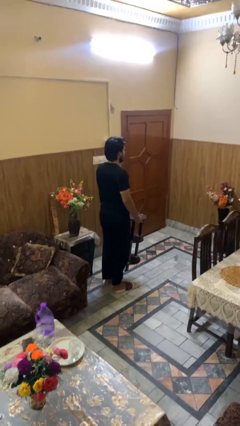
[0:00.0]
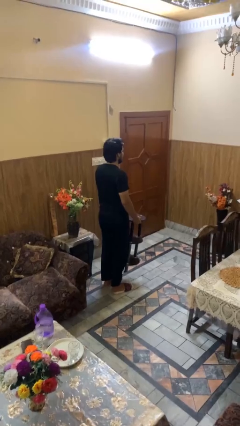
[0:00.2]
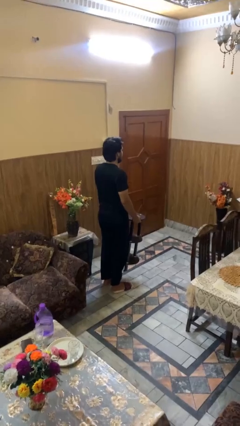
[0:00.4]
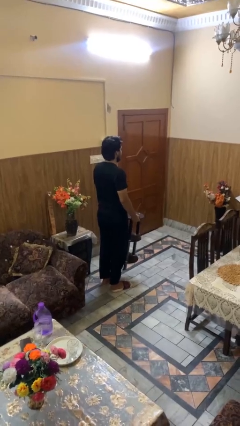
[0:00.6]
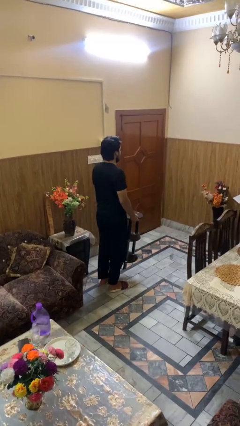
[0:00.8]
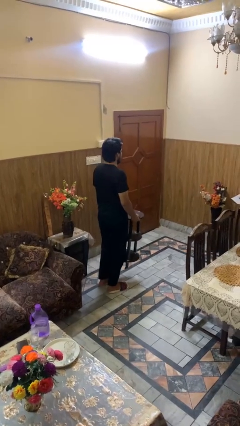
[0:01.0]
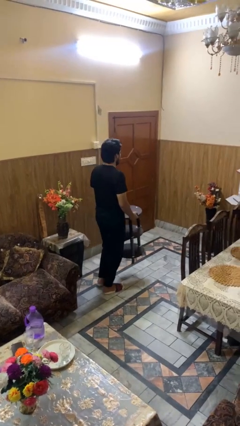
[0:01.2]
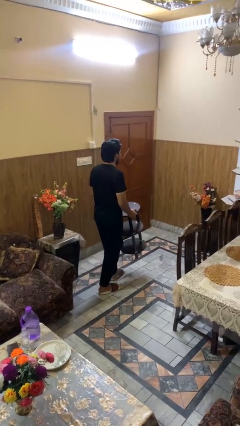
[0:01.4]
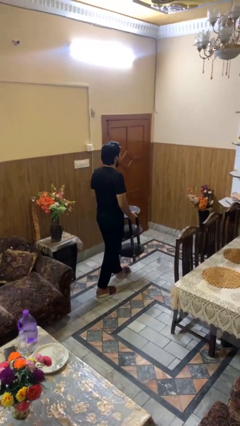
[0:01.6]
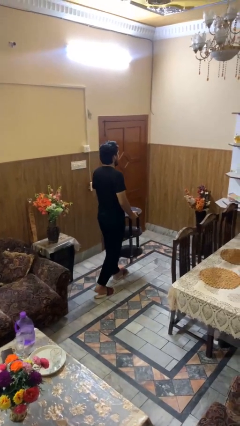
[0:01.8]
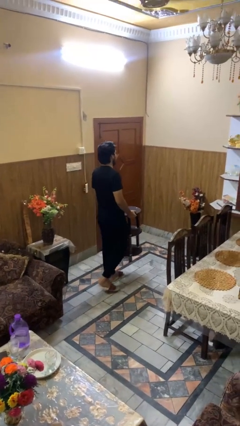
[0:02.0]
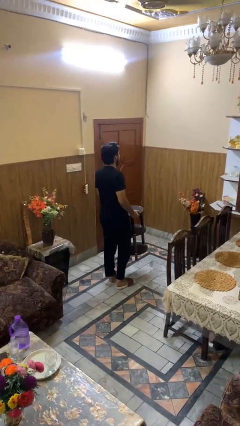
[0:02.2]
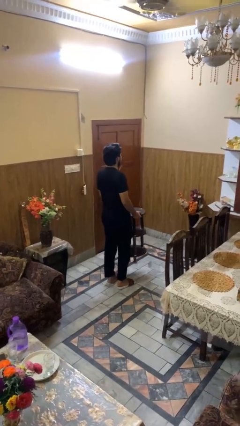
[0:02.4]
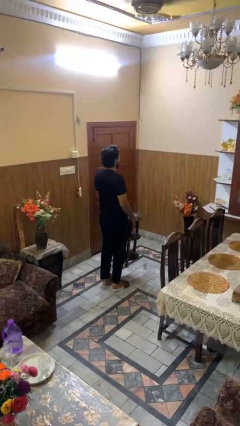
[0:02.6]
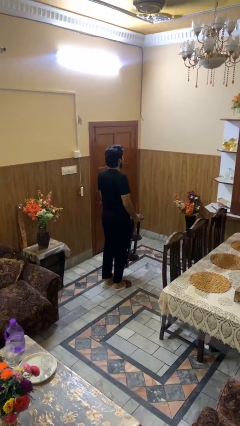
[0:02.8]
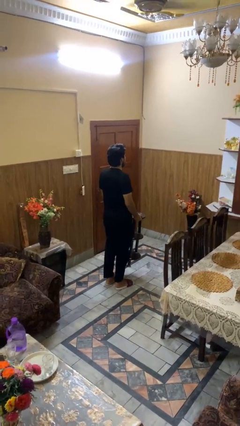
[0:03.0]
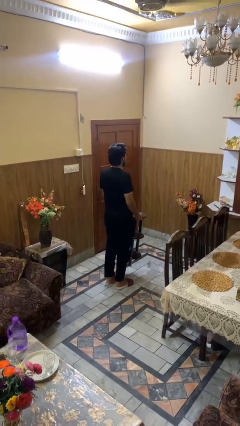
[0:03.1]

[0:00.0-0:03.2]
person carries furniture

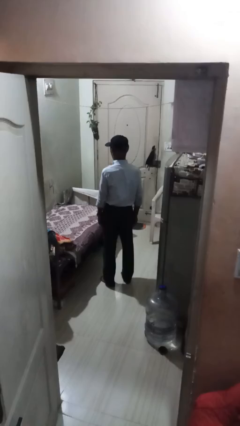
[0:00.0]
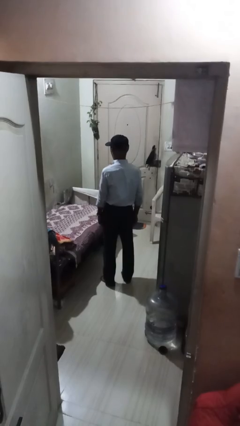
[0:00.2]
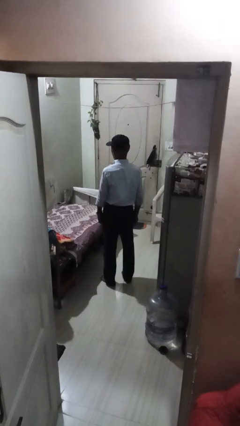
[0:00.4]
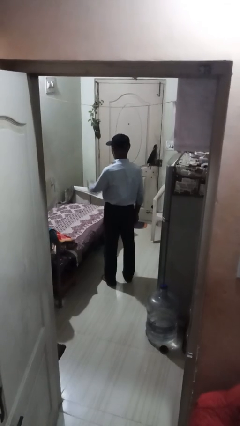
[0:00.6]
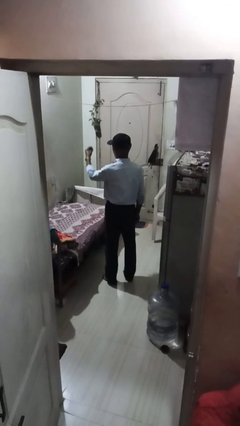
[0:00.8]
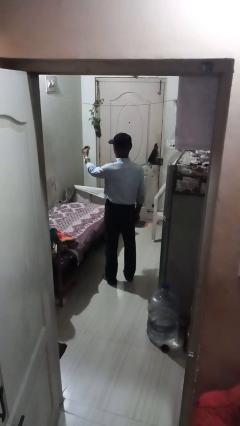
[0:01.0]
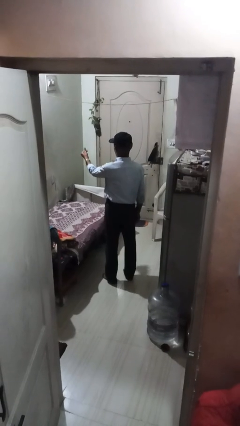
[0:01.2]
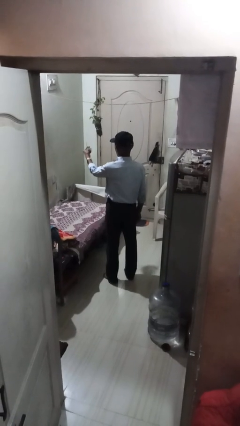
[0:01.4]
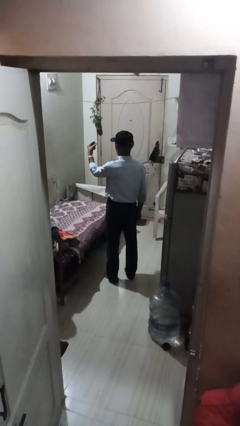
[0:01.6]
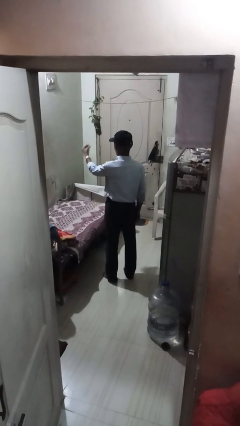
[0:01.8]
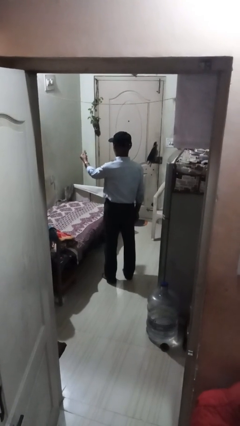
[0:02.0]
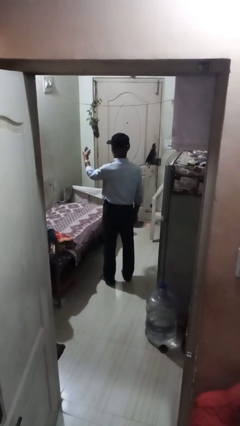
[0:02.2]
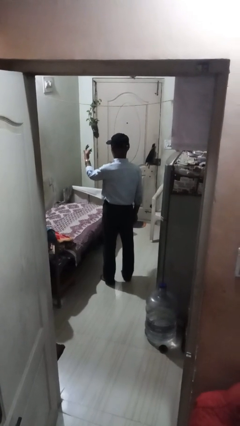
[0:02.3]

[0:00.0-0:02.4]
person snaps fingers

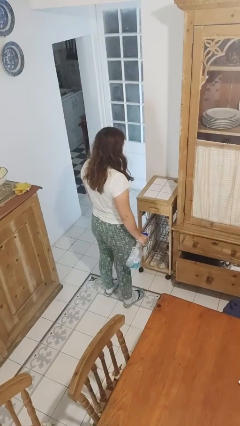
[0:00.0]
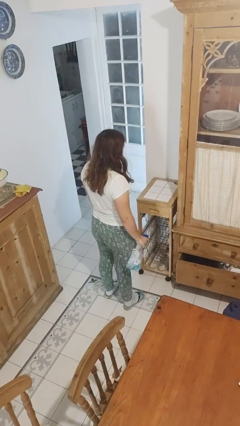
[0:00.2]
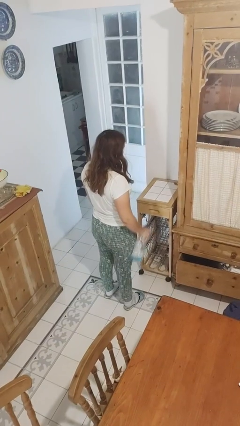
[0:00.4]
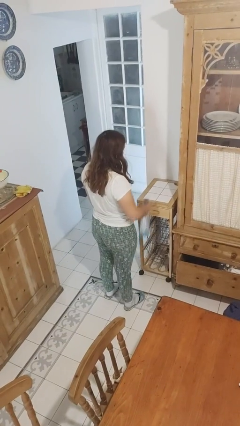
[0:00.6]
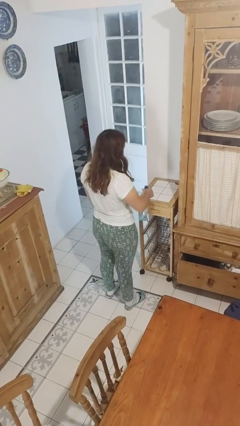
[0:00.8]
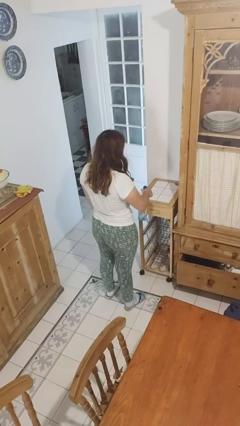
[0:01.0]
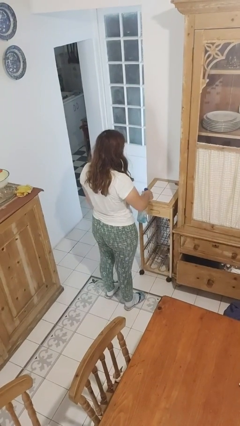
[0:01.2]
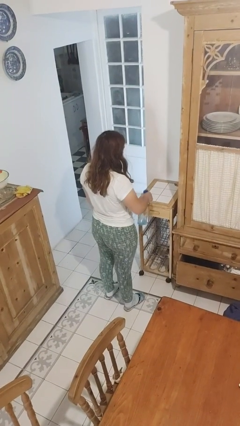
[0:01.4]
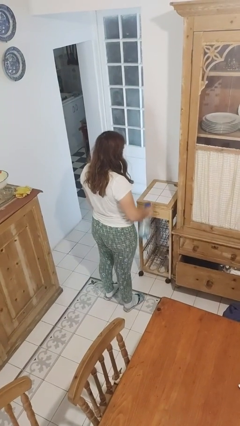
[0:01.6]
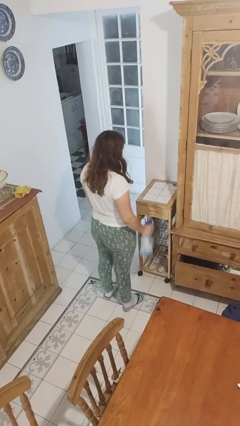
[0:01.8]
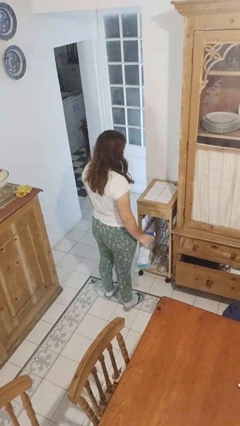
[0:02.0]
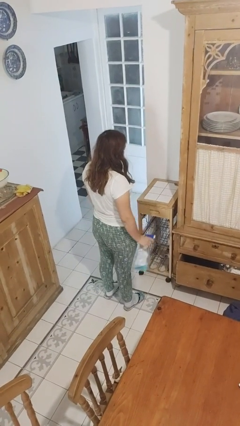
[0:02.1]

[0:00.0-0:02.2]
person sprays from bottle

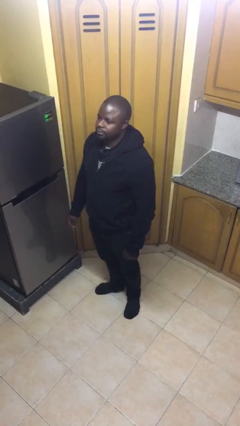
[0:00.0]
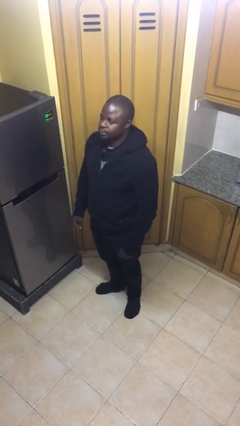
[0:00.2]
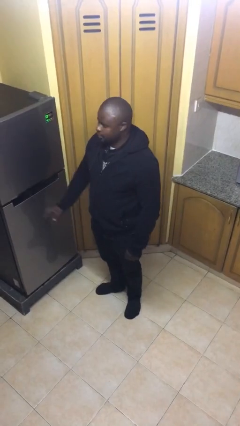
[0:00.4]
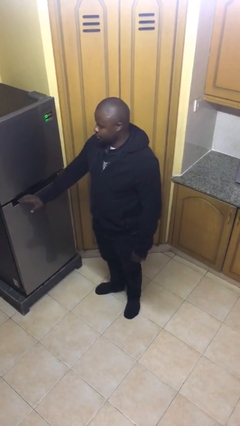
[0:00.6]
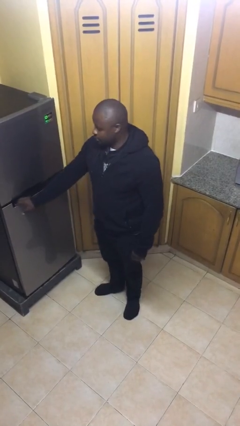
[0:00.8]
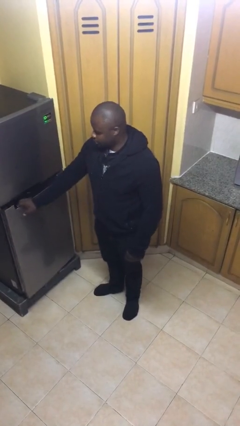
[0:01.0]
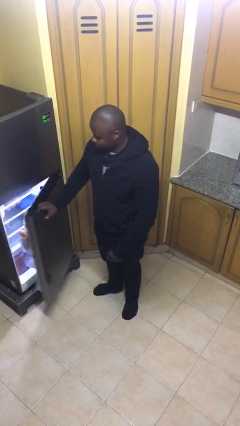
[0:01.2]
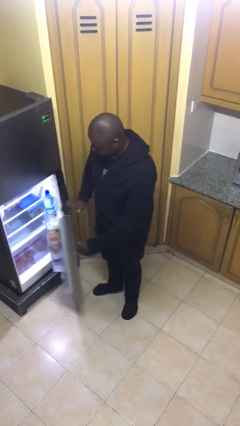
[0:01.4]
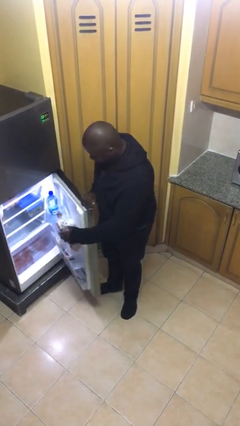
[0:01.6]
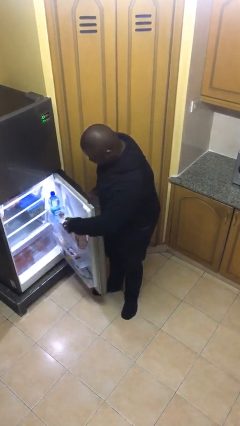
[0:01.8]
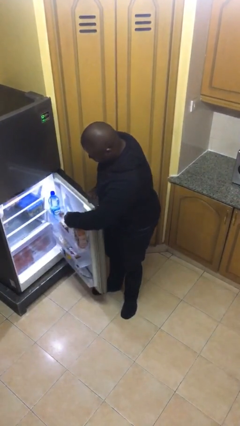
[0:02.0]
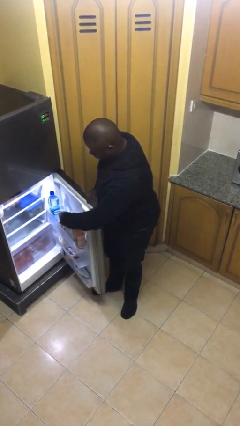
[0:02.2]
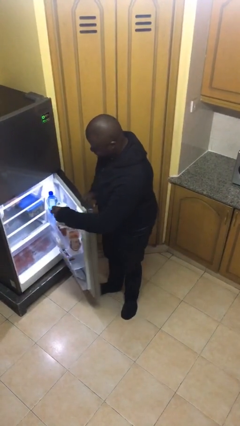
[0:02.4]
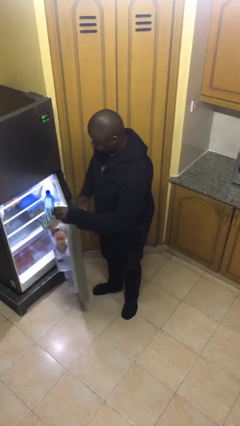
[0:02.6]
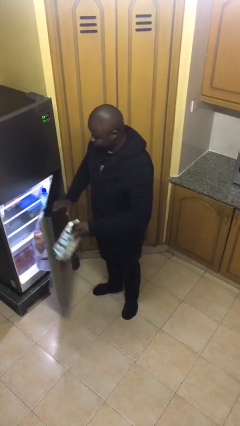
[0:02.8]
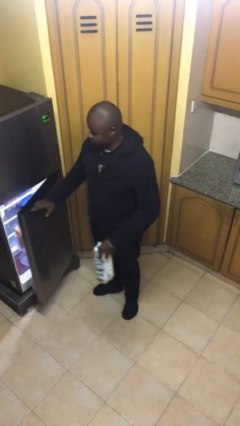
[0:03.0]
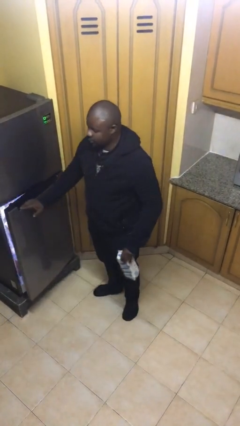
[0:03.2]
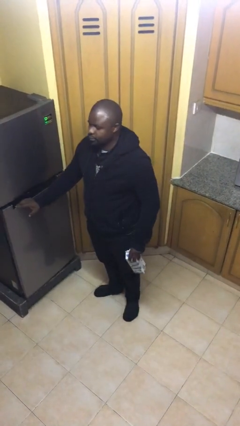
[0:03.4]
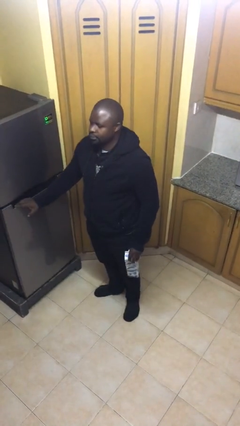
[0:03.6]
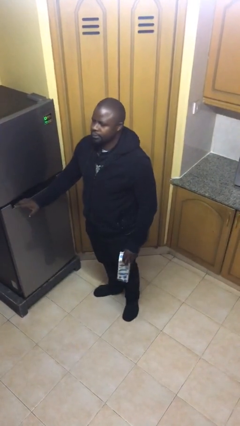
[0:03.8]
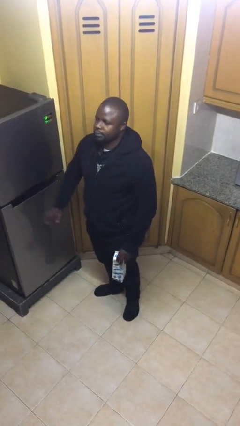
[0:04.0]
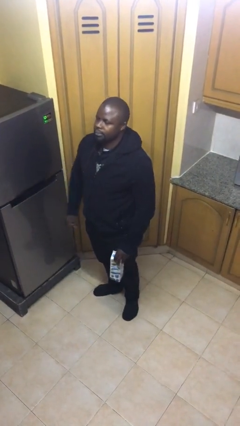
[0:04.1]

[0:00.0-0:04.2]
person takes object from refrigerator

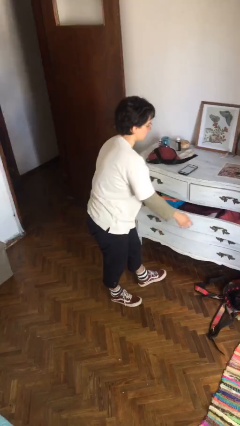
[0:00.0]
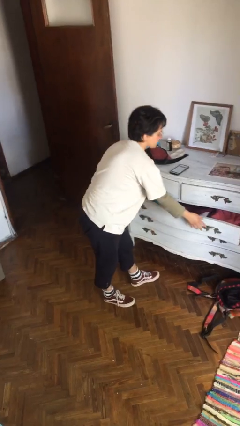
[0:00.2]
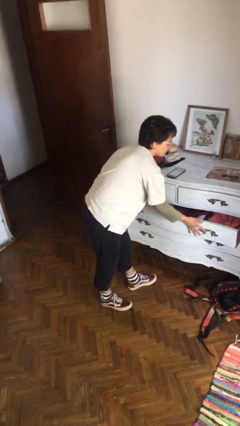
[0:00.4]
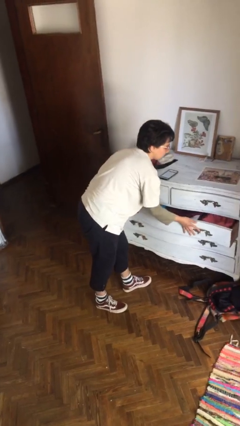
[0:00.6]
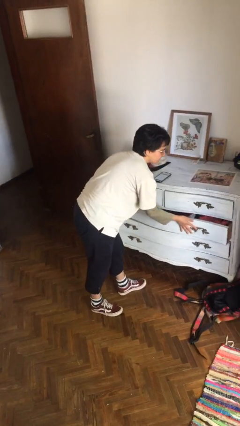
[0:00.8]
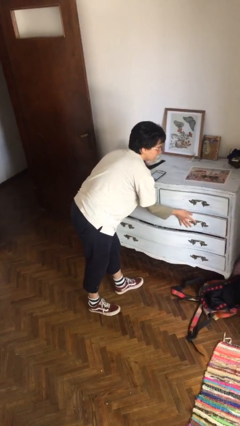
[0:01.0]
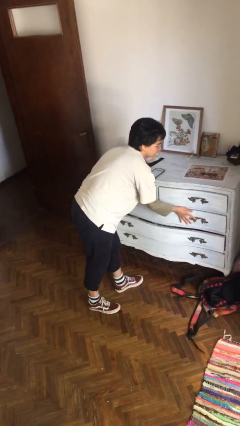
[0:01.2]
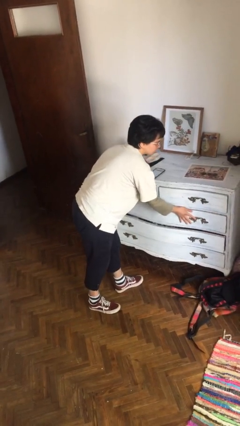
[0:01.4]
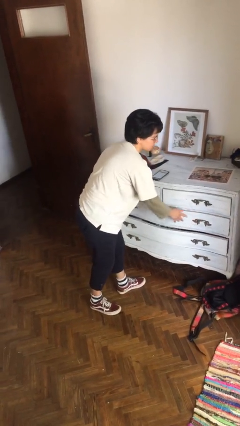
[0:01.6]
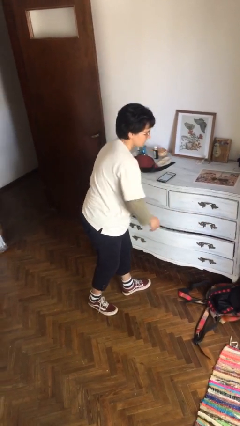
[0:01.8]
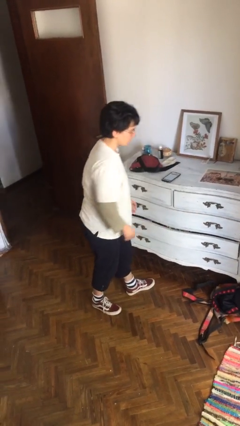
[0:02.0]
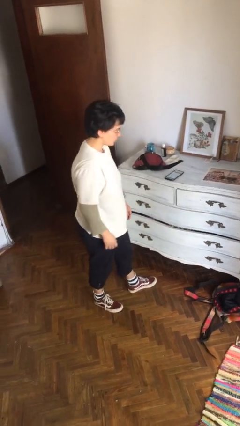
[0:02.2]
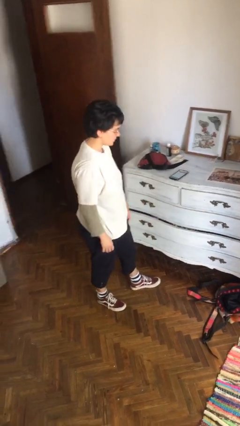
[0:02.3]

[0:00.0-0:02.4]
person closes dresser drawer

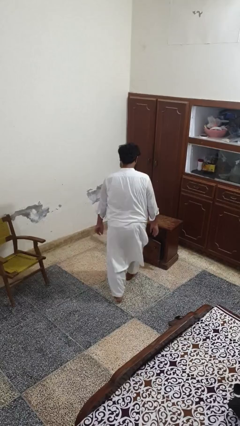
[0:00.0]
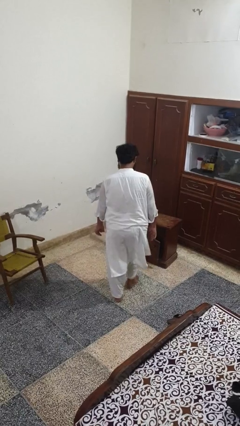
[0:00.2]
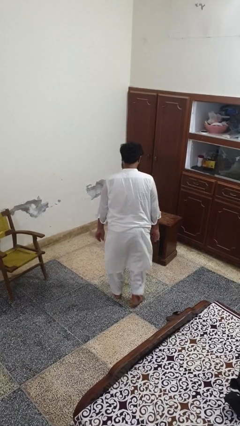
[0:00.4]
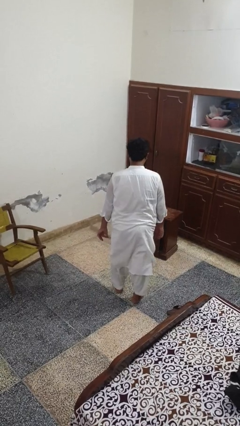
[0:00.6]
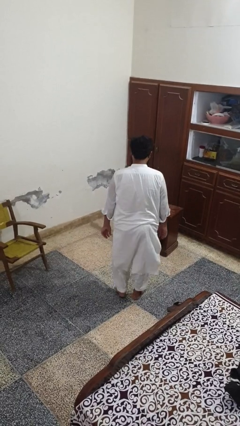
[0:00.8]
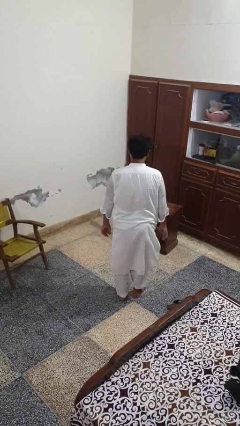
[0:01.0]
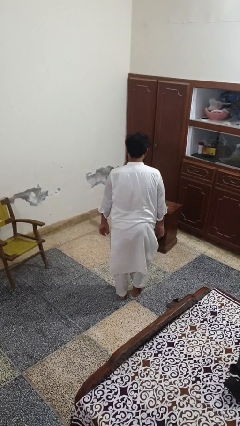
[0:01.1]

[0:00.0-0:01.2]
person stubs toe

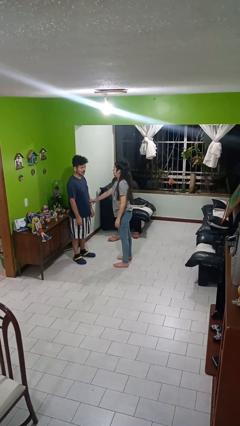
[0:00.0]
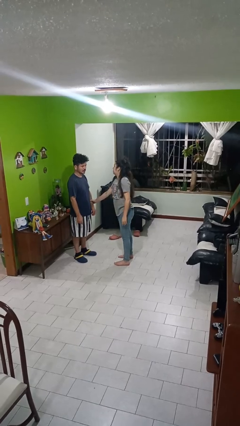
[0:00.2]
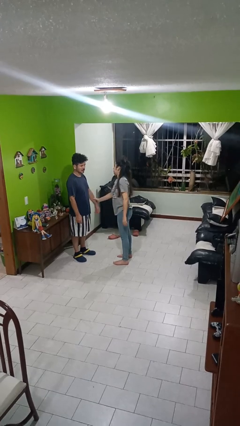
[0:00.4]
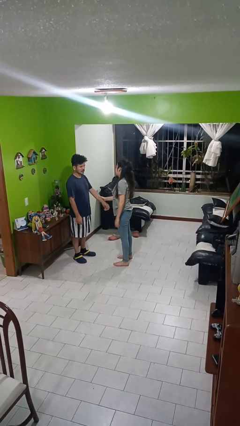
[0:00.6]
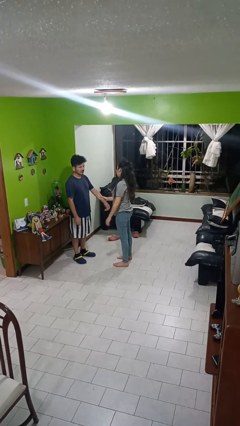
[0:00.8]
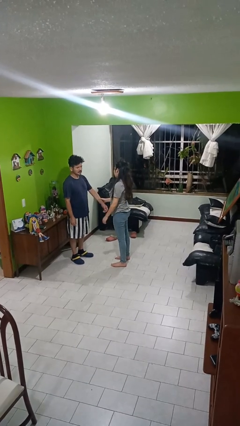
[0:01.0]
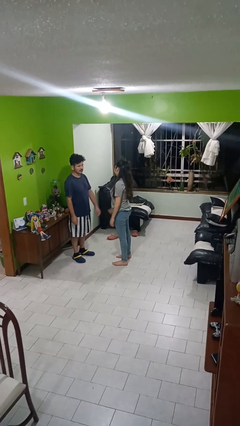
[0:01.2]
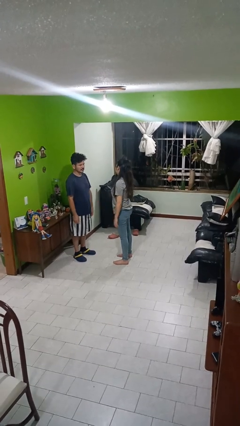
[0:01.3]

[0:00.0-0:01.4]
person grabs person by forearm

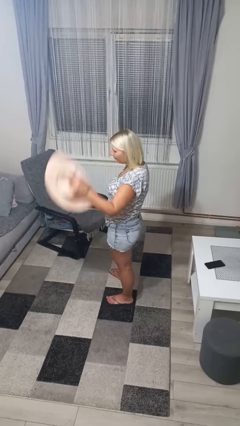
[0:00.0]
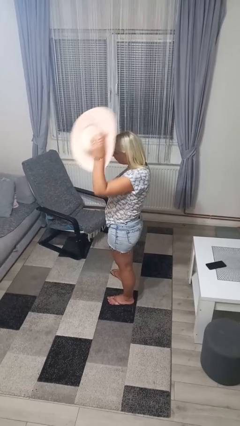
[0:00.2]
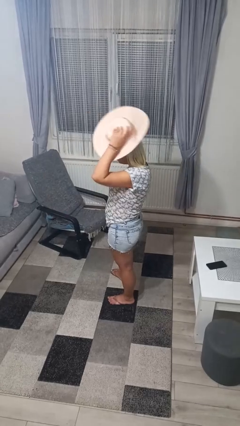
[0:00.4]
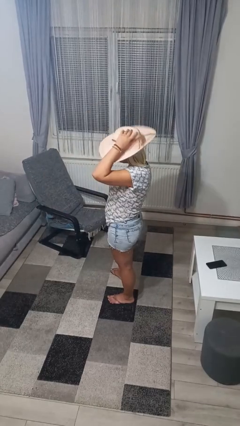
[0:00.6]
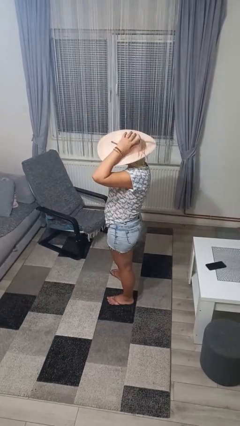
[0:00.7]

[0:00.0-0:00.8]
person puts on hat
